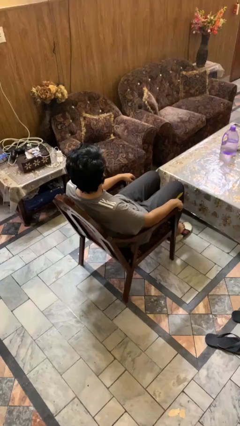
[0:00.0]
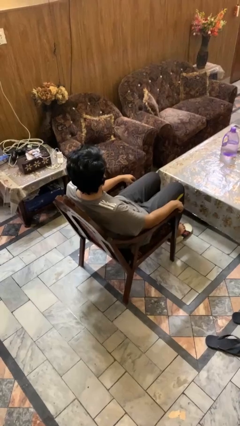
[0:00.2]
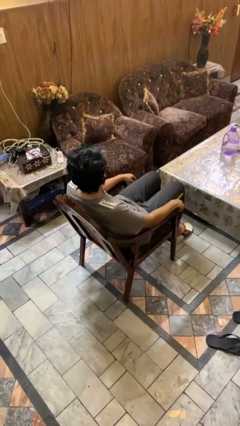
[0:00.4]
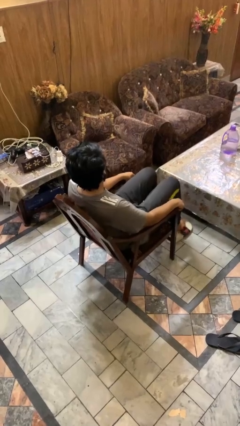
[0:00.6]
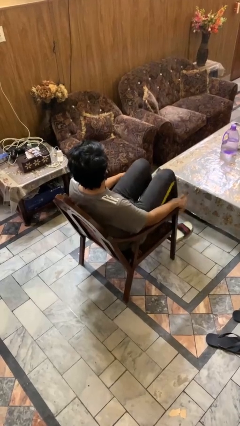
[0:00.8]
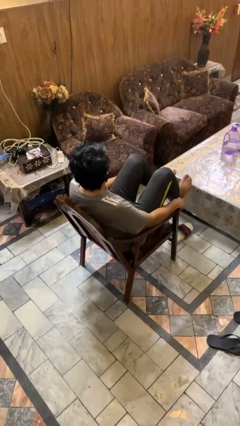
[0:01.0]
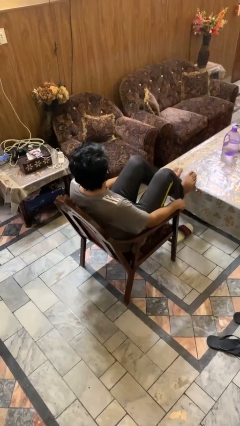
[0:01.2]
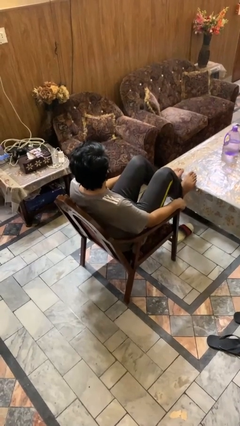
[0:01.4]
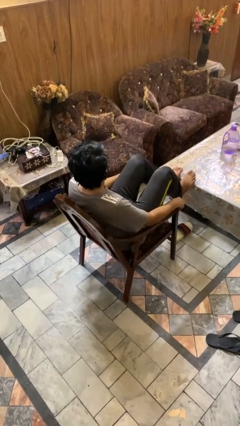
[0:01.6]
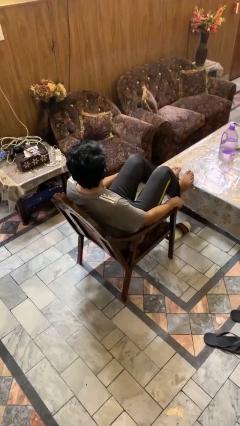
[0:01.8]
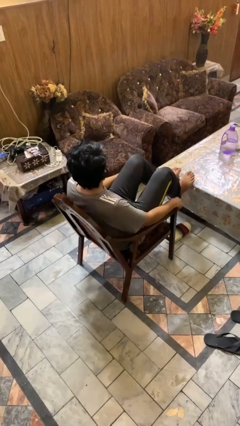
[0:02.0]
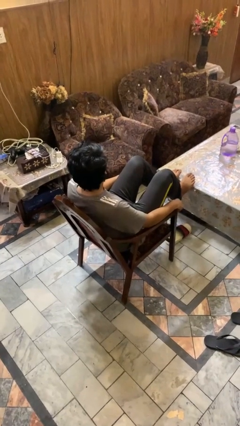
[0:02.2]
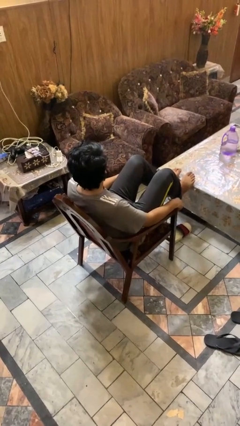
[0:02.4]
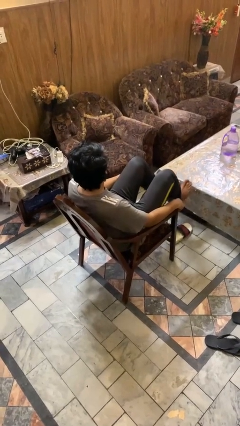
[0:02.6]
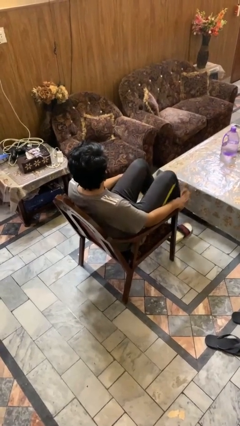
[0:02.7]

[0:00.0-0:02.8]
person puts feet up

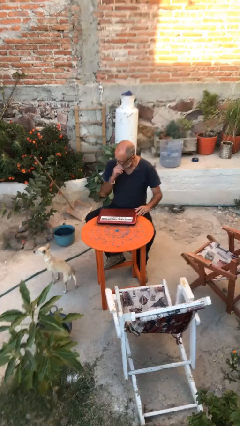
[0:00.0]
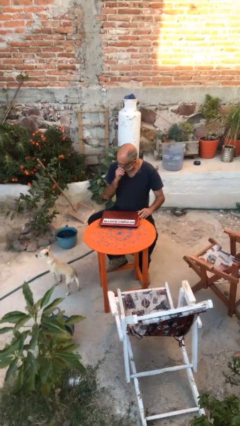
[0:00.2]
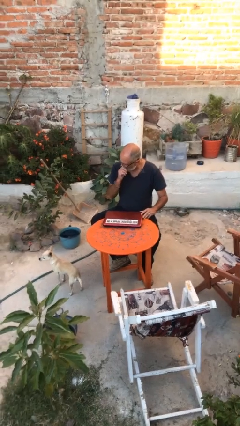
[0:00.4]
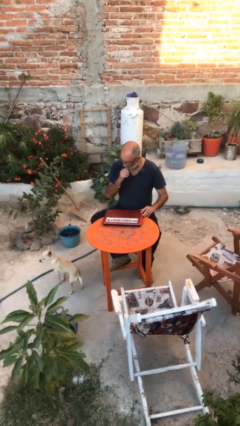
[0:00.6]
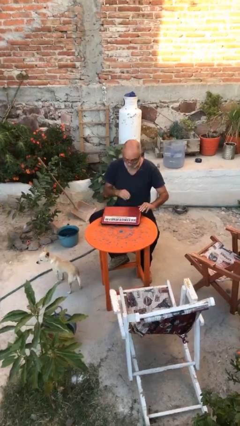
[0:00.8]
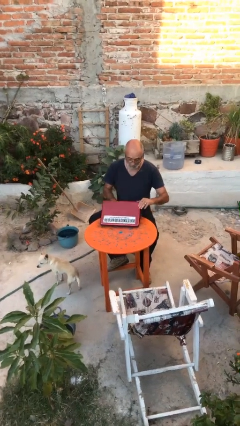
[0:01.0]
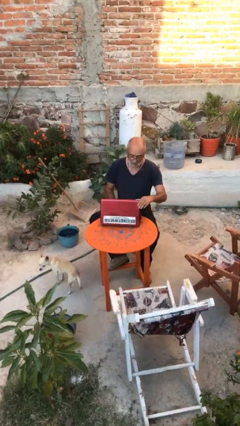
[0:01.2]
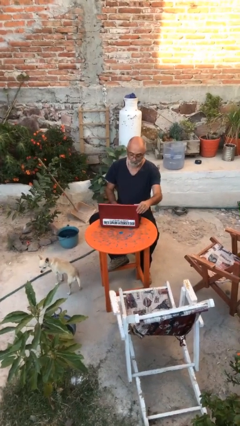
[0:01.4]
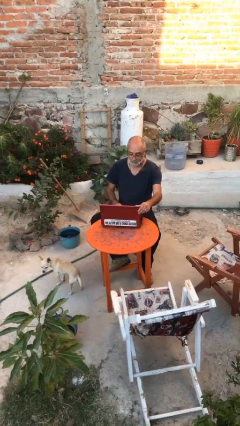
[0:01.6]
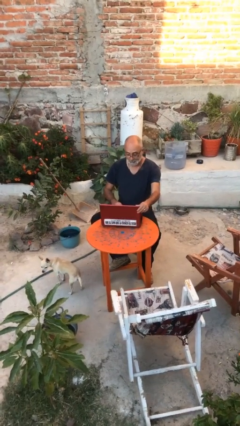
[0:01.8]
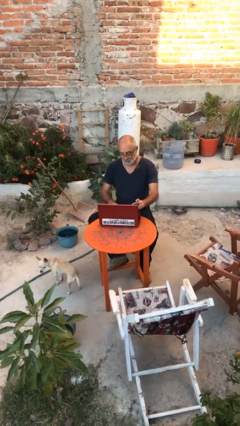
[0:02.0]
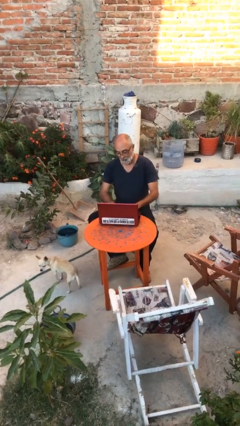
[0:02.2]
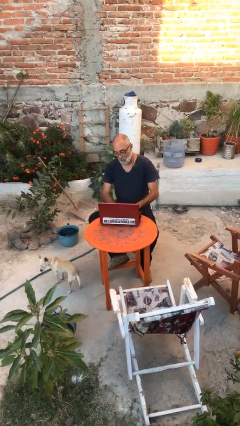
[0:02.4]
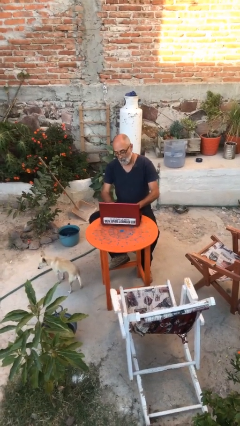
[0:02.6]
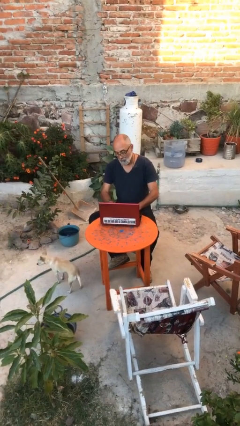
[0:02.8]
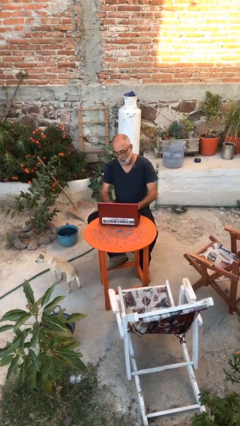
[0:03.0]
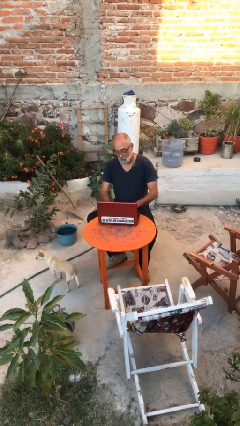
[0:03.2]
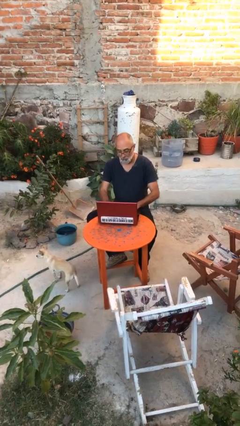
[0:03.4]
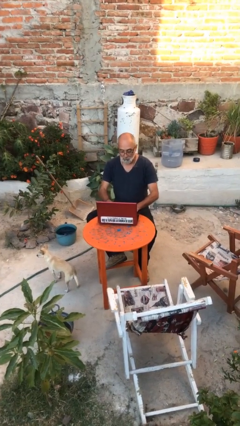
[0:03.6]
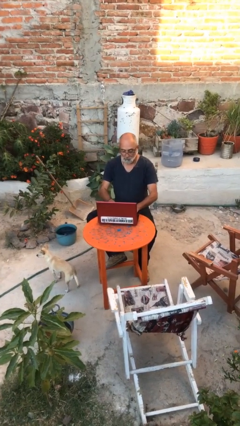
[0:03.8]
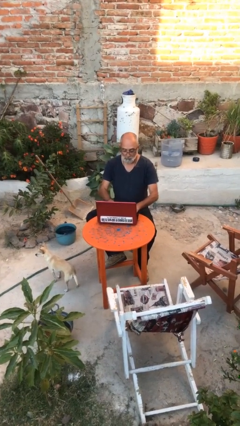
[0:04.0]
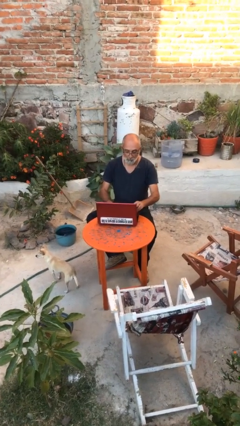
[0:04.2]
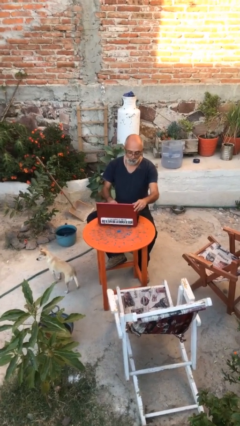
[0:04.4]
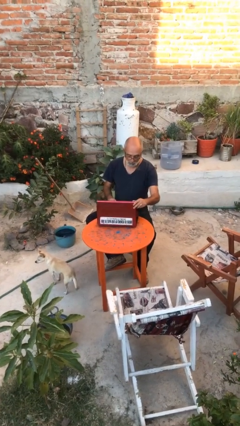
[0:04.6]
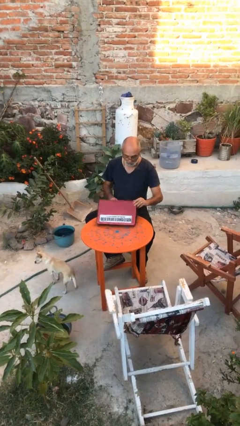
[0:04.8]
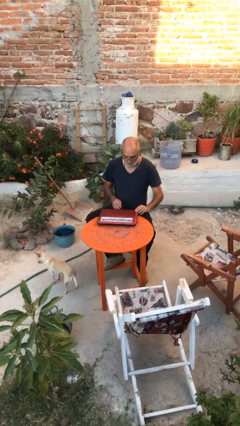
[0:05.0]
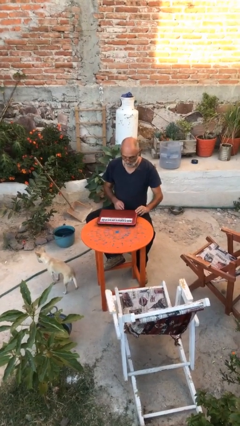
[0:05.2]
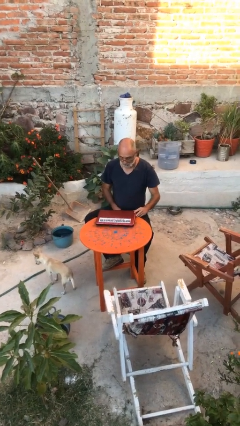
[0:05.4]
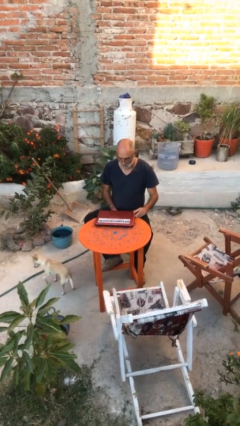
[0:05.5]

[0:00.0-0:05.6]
person interacts with laptop

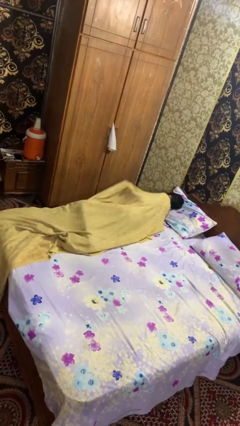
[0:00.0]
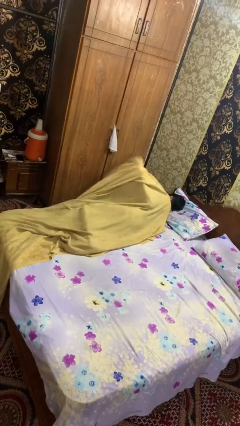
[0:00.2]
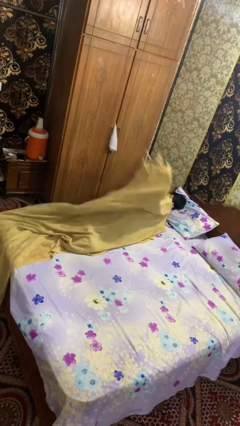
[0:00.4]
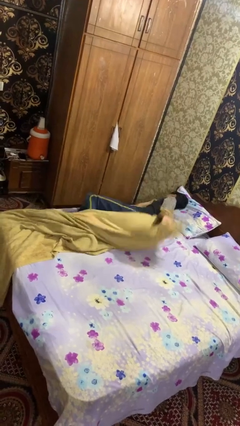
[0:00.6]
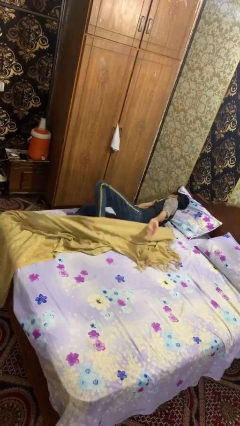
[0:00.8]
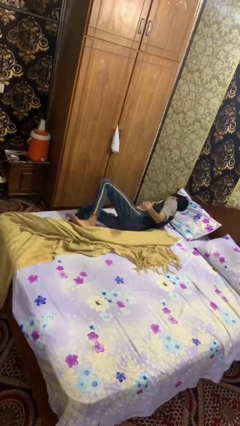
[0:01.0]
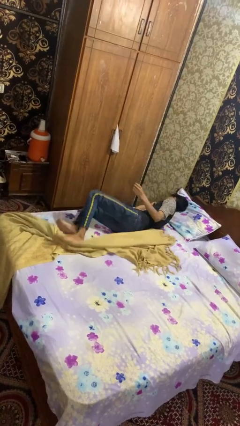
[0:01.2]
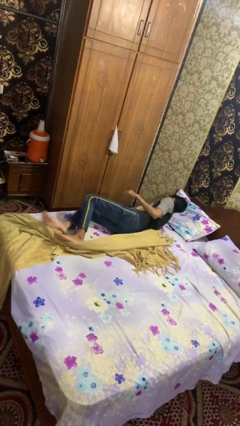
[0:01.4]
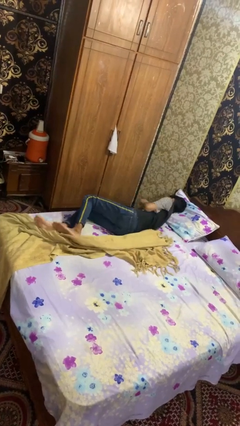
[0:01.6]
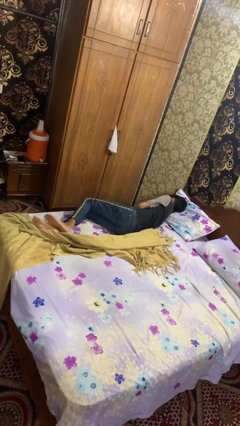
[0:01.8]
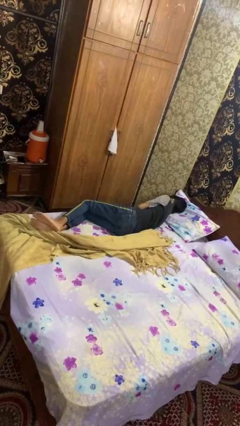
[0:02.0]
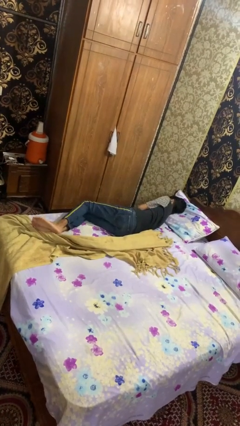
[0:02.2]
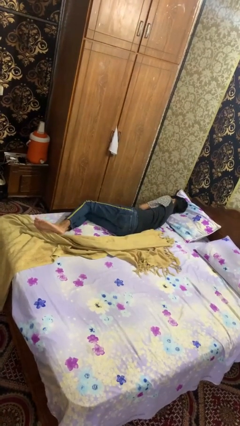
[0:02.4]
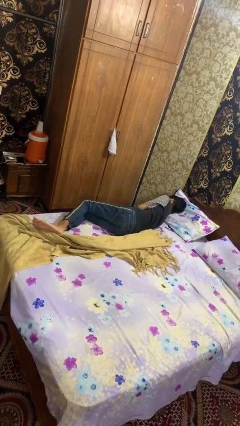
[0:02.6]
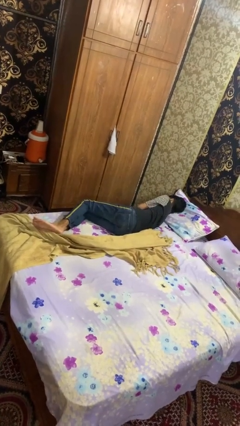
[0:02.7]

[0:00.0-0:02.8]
person uncovers with bedsheets

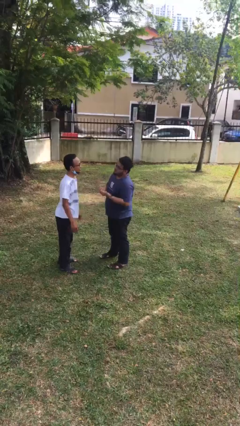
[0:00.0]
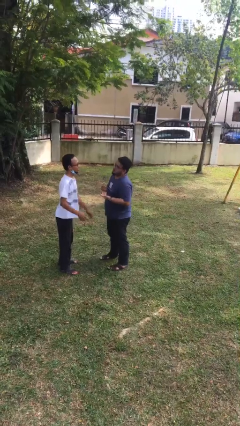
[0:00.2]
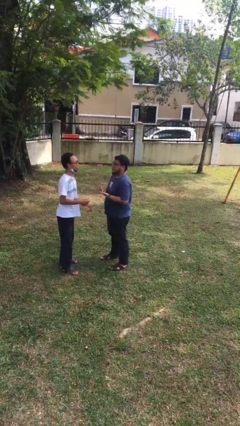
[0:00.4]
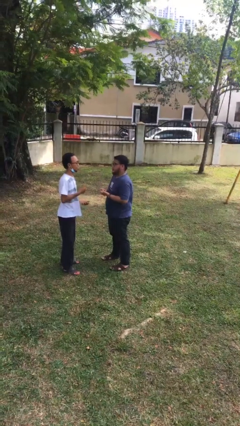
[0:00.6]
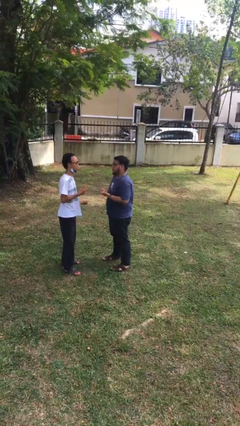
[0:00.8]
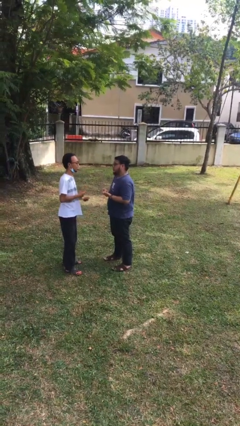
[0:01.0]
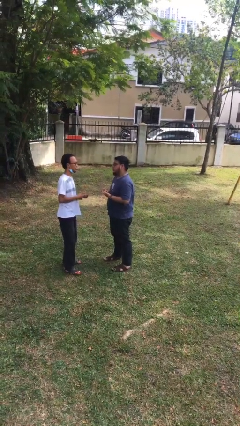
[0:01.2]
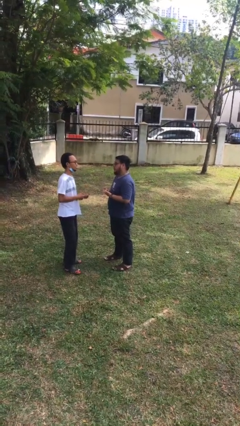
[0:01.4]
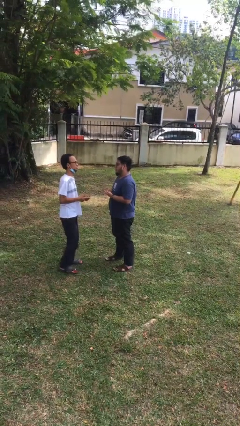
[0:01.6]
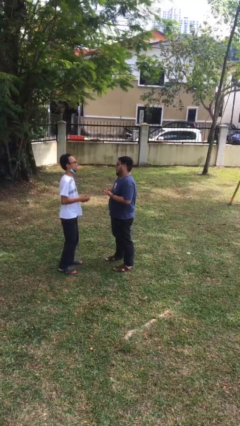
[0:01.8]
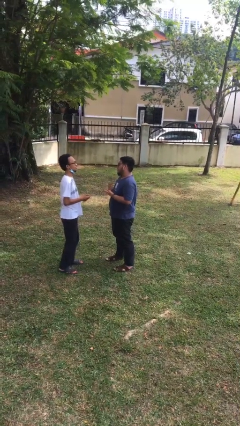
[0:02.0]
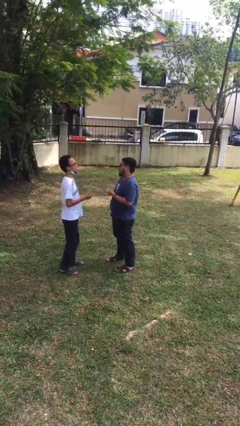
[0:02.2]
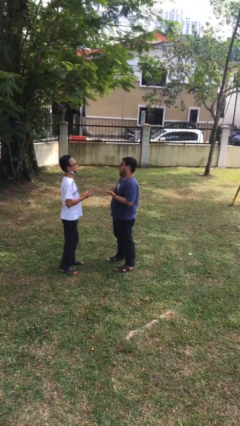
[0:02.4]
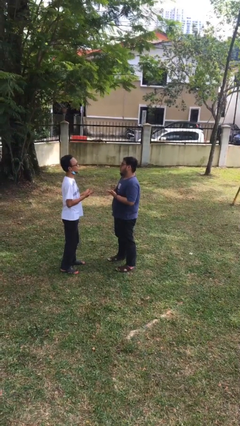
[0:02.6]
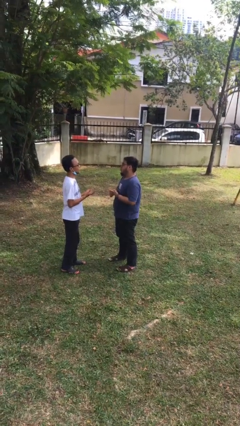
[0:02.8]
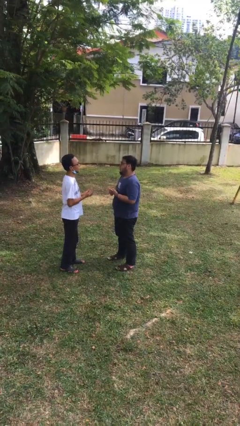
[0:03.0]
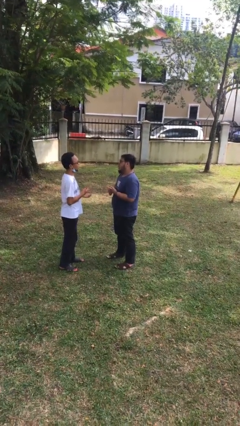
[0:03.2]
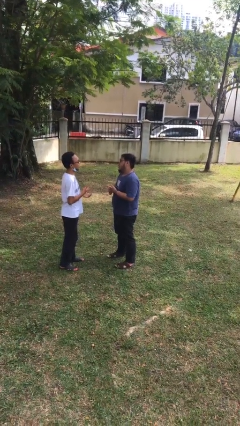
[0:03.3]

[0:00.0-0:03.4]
person talks to person

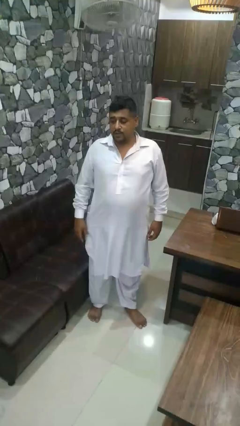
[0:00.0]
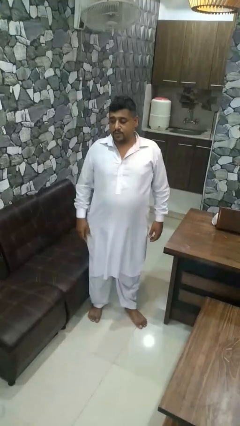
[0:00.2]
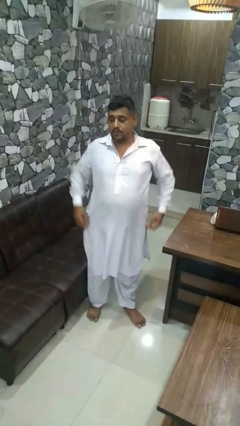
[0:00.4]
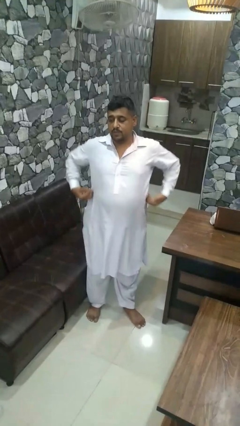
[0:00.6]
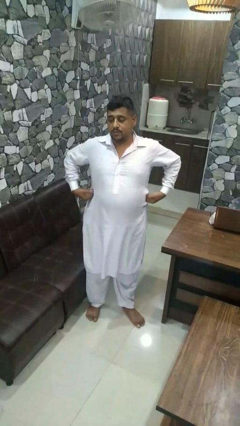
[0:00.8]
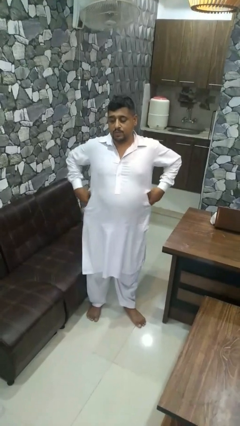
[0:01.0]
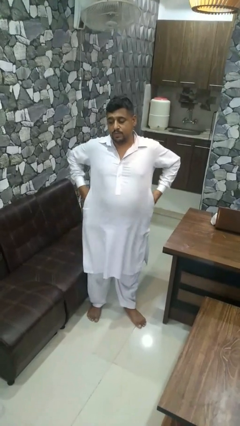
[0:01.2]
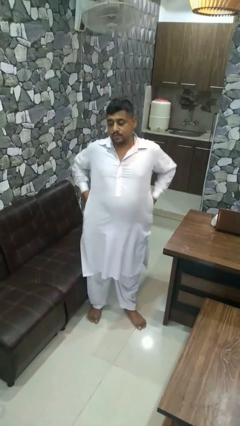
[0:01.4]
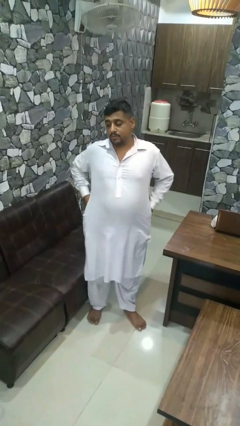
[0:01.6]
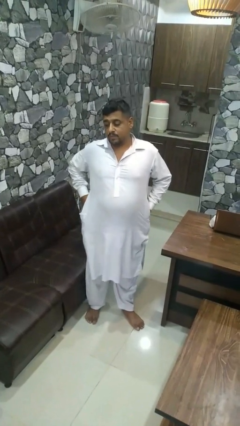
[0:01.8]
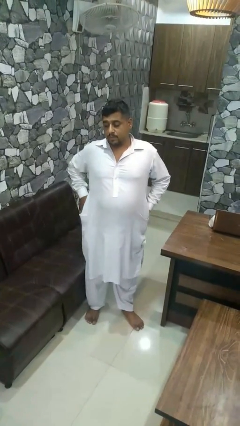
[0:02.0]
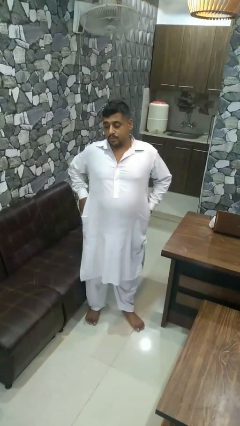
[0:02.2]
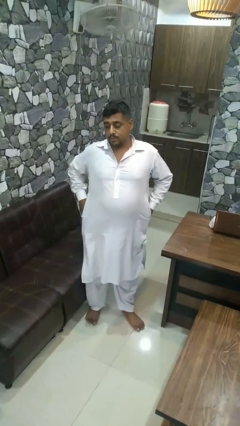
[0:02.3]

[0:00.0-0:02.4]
person puts hands in back pockets

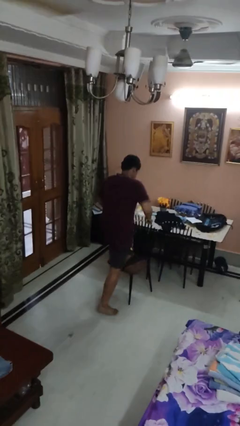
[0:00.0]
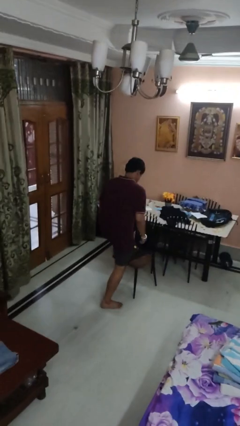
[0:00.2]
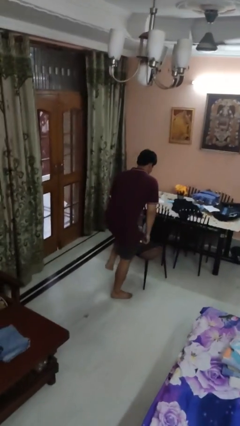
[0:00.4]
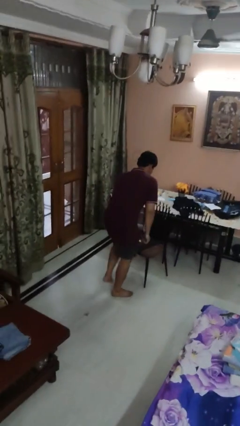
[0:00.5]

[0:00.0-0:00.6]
person climbs off chair
